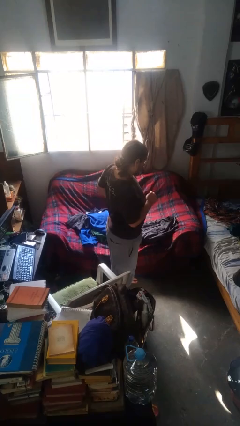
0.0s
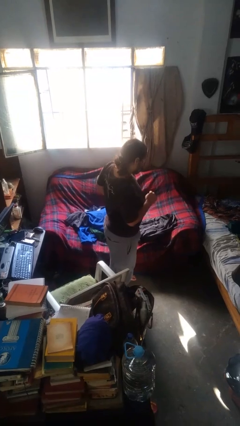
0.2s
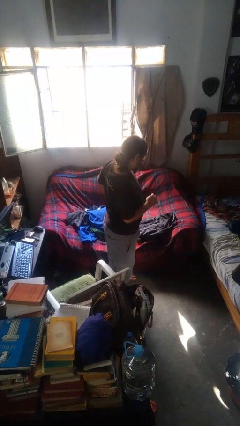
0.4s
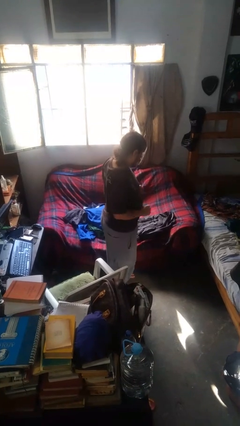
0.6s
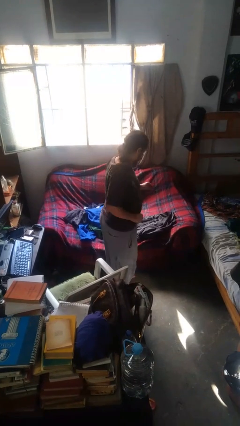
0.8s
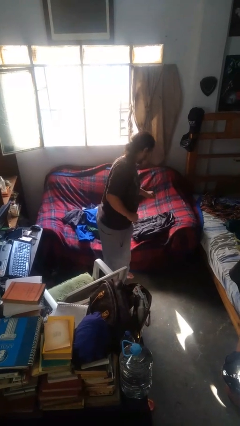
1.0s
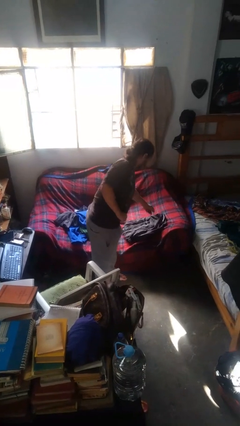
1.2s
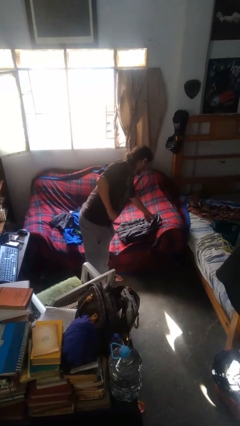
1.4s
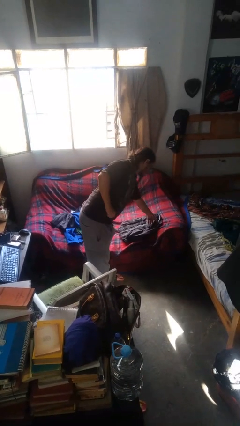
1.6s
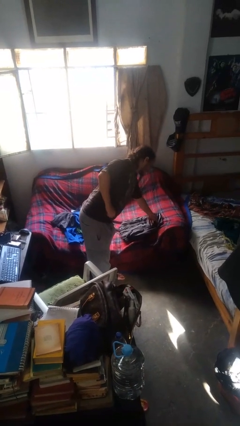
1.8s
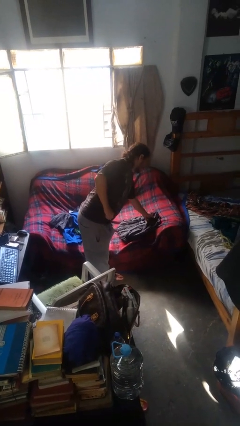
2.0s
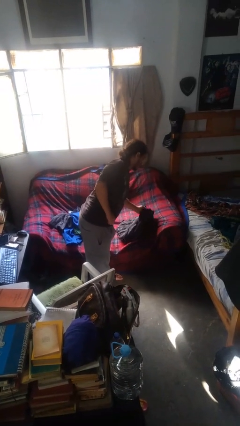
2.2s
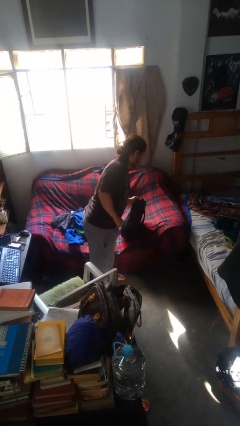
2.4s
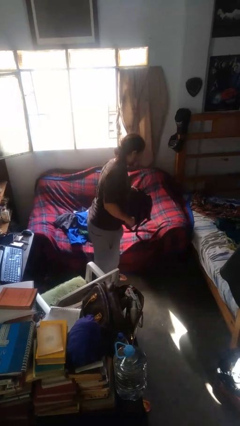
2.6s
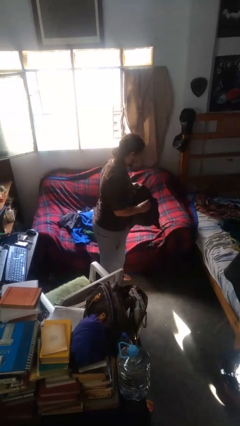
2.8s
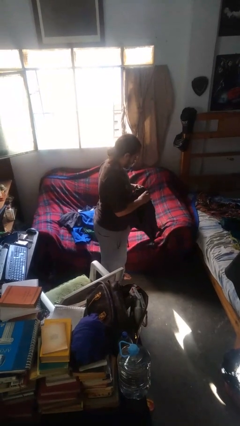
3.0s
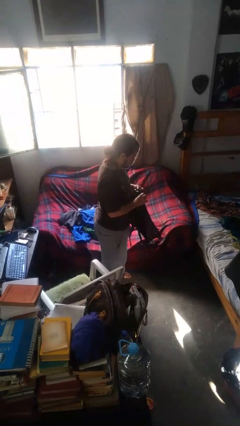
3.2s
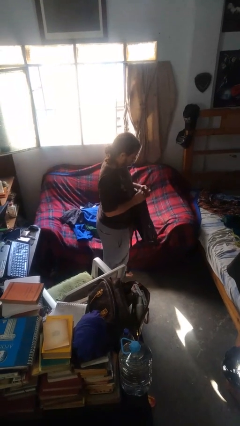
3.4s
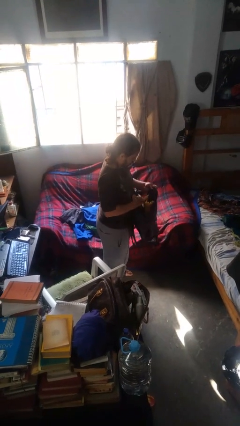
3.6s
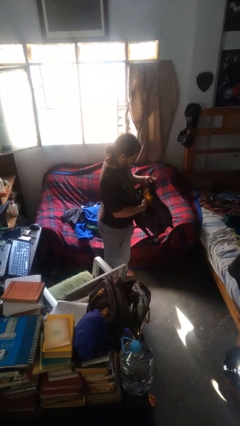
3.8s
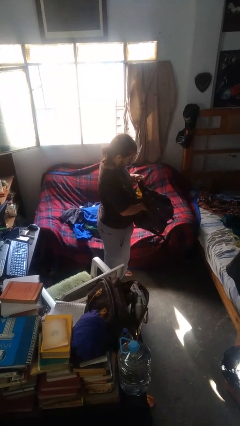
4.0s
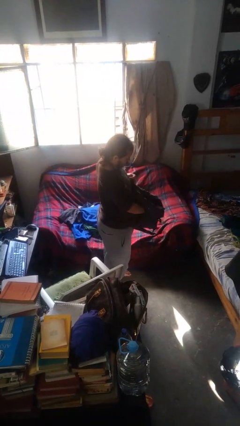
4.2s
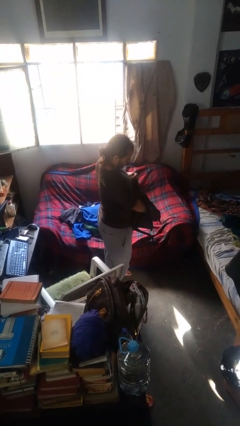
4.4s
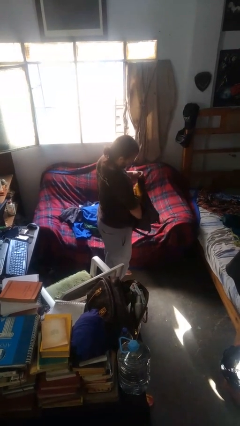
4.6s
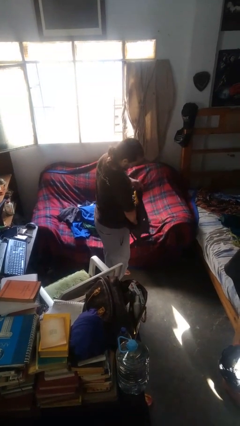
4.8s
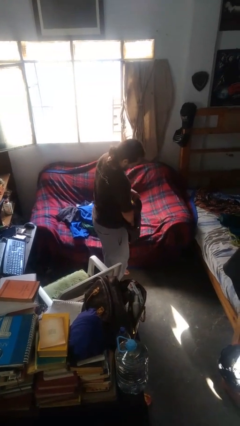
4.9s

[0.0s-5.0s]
person searches in backpack

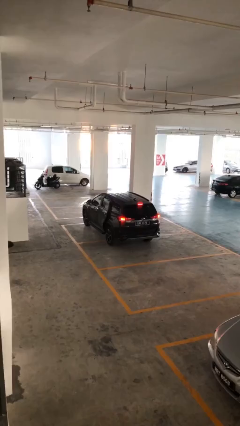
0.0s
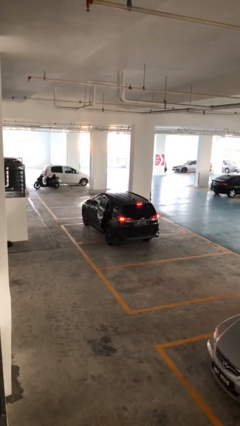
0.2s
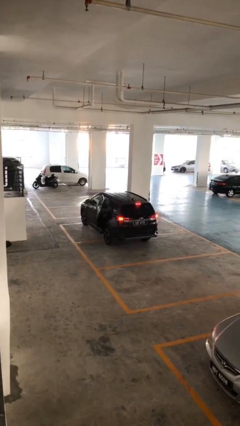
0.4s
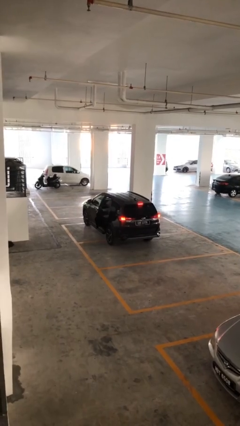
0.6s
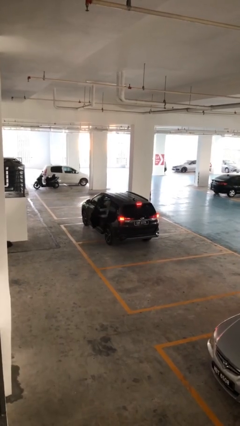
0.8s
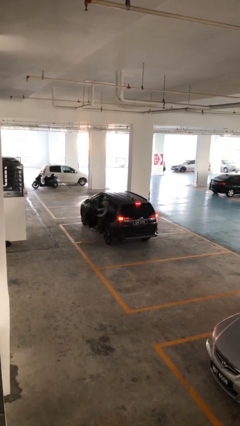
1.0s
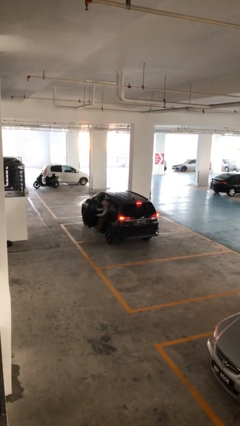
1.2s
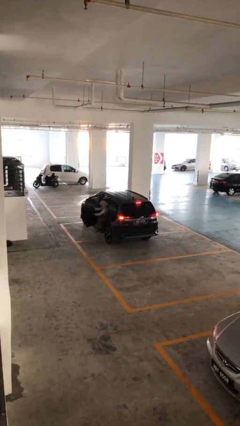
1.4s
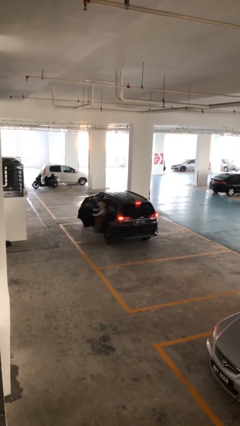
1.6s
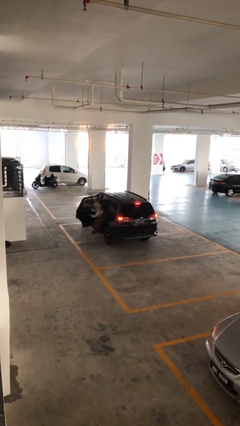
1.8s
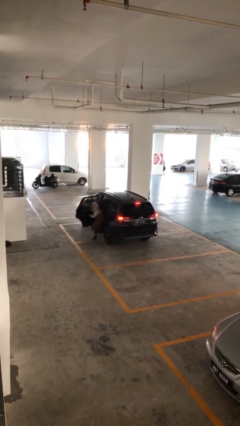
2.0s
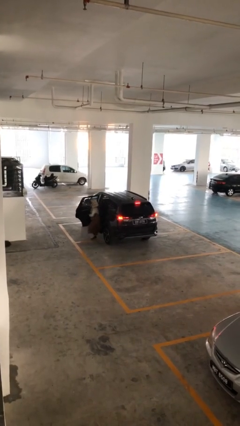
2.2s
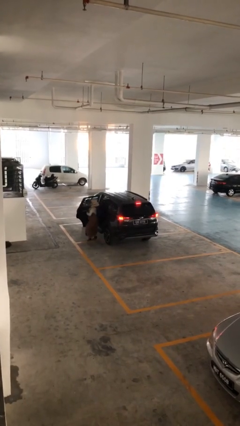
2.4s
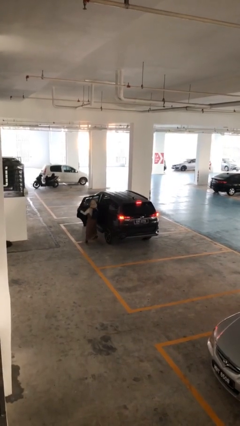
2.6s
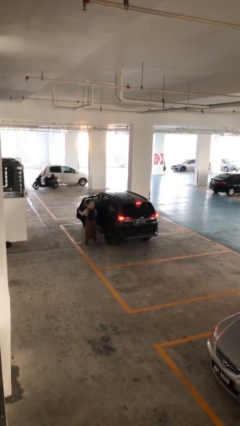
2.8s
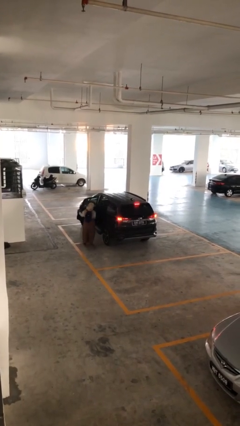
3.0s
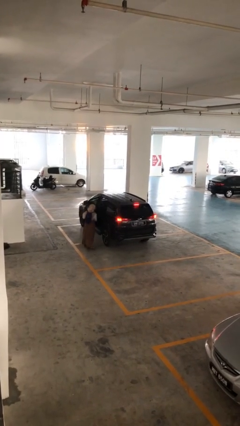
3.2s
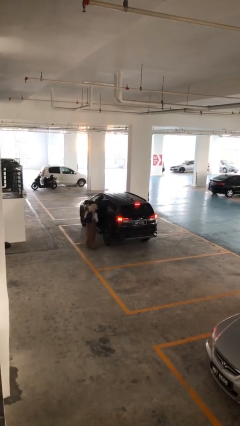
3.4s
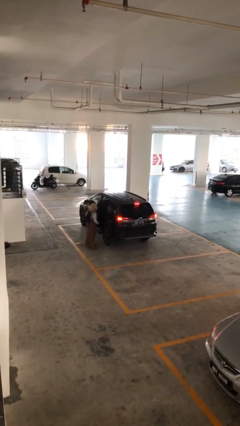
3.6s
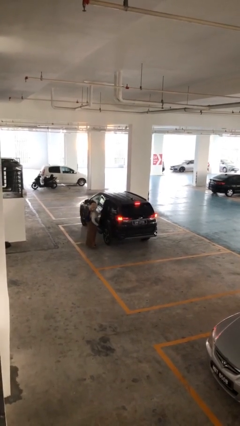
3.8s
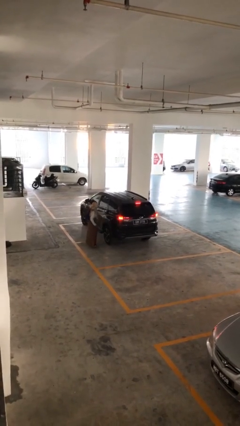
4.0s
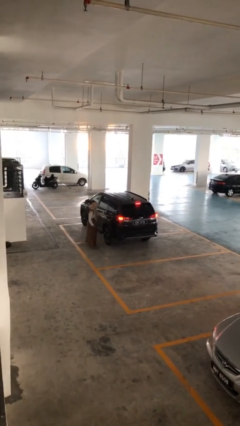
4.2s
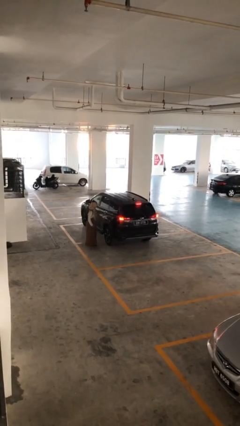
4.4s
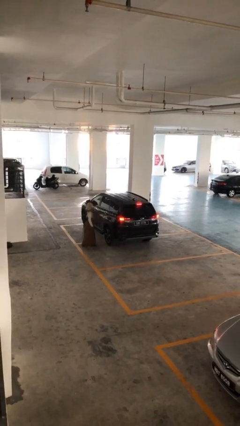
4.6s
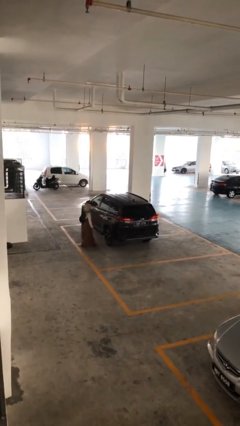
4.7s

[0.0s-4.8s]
car drops off person

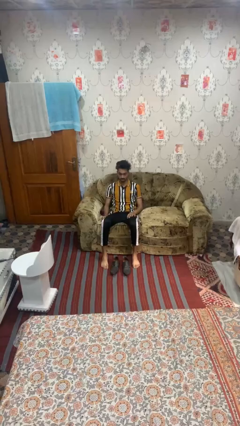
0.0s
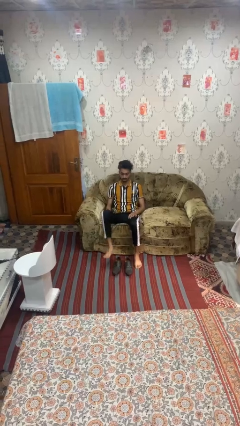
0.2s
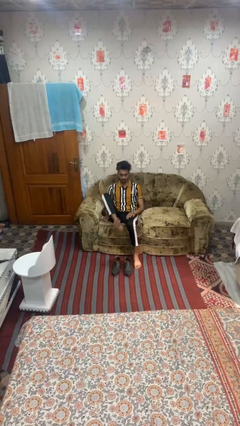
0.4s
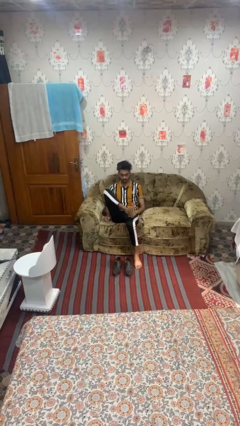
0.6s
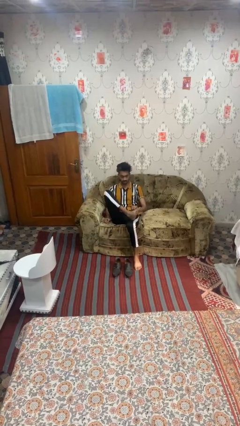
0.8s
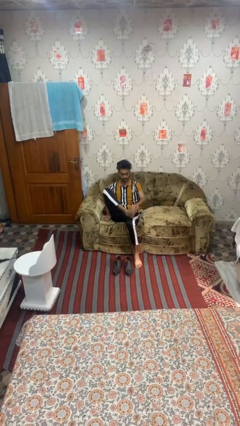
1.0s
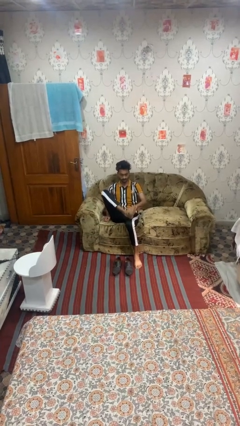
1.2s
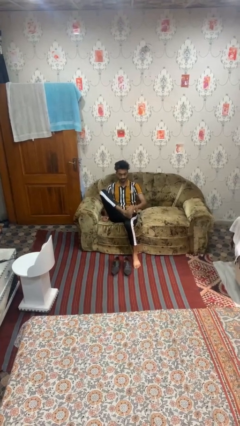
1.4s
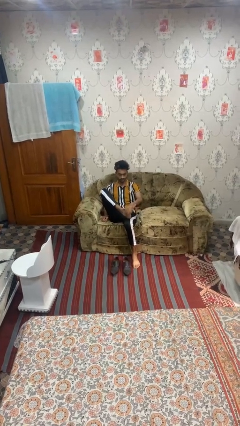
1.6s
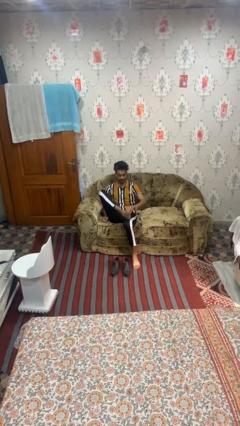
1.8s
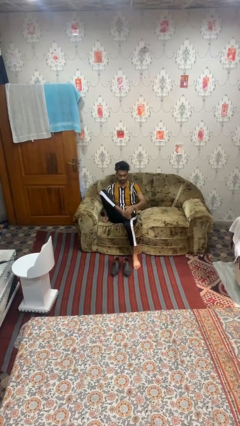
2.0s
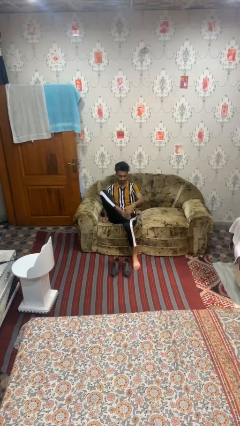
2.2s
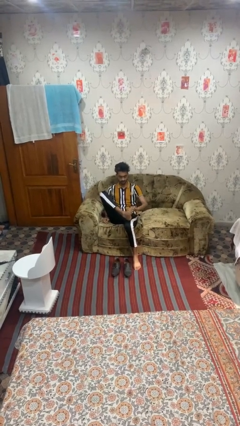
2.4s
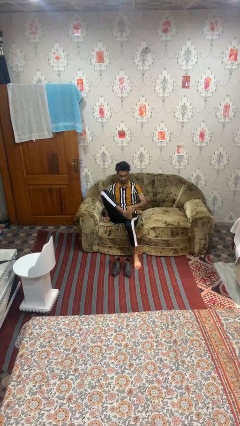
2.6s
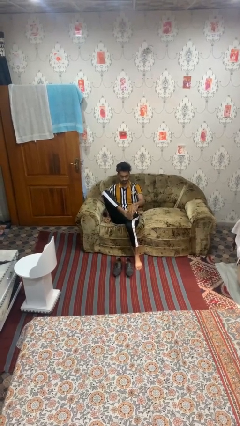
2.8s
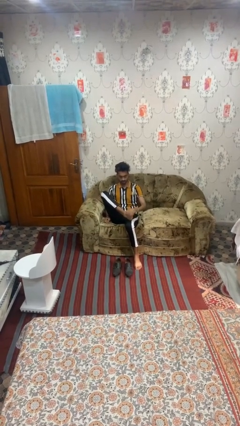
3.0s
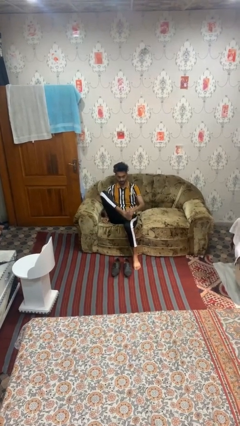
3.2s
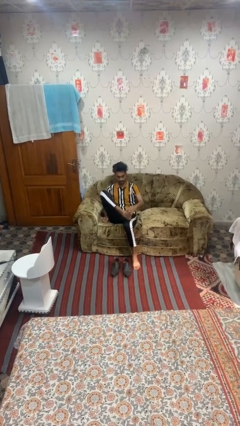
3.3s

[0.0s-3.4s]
person rubs foot

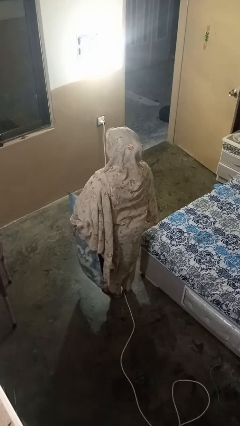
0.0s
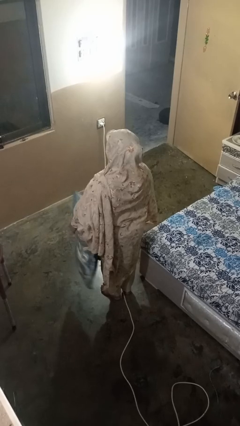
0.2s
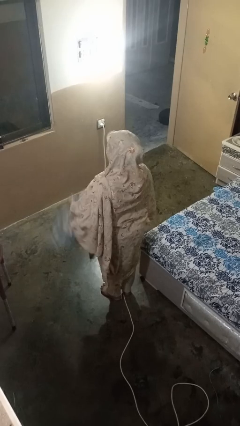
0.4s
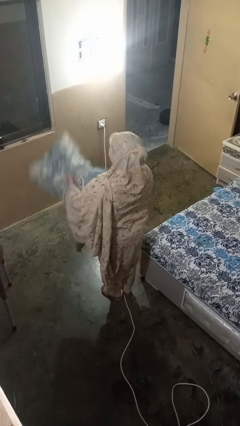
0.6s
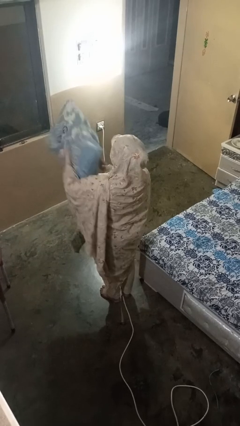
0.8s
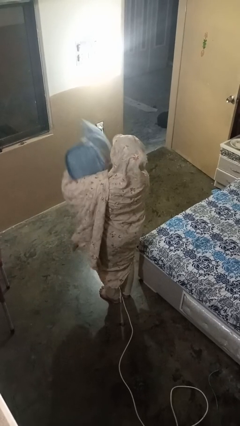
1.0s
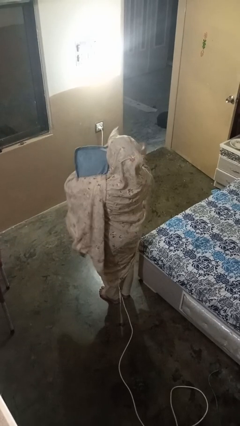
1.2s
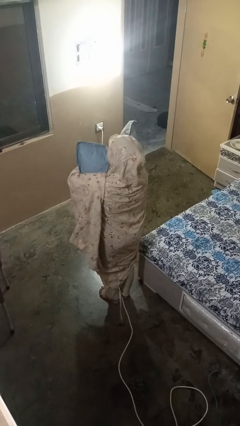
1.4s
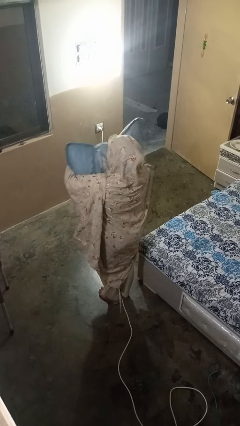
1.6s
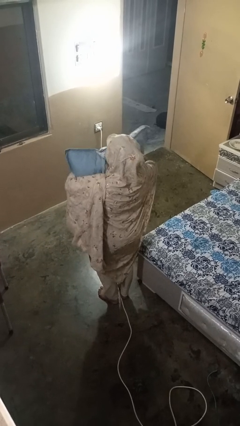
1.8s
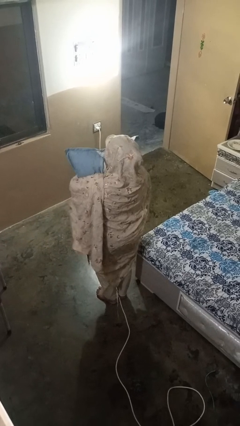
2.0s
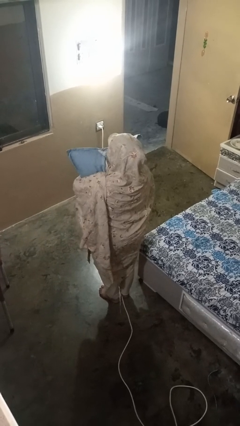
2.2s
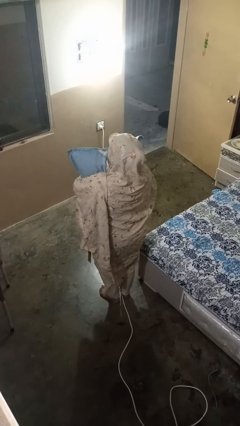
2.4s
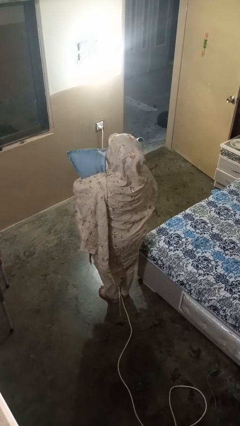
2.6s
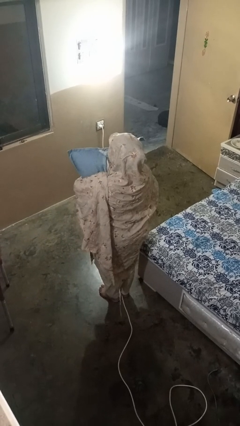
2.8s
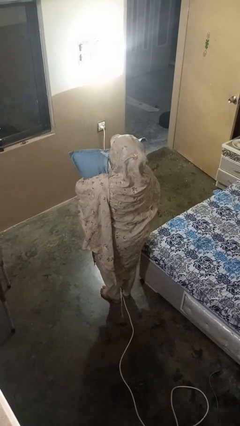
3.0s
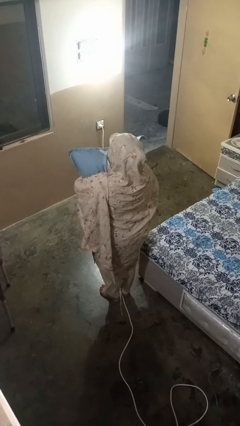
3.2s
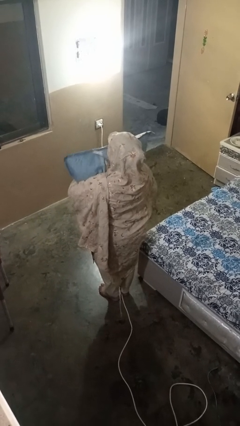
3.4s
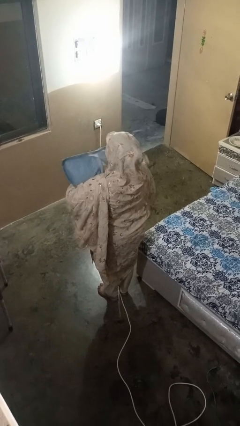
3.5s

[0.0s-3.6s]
person squeezes object

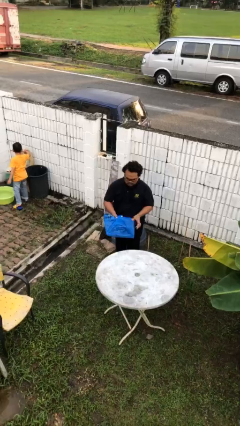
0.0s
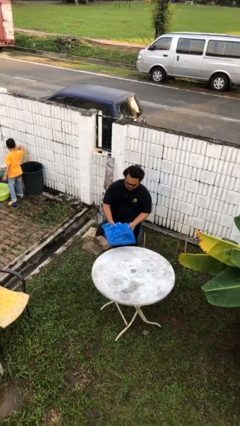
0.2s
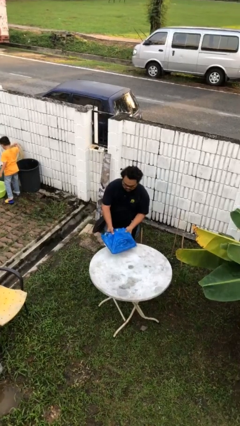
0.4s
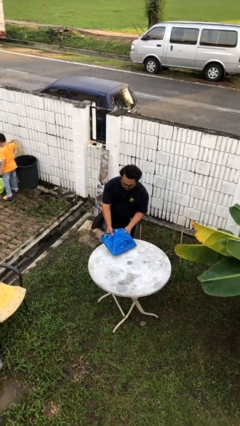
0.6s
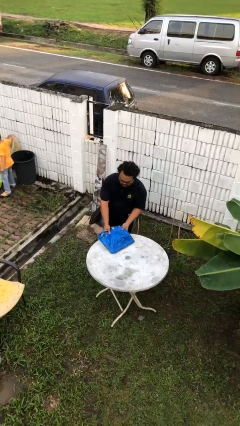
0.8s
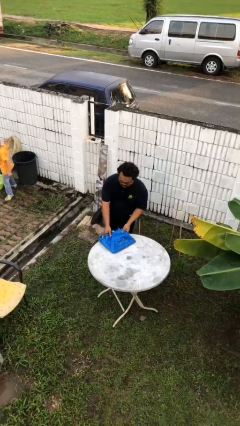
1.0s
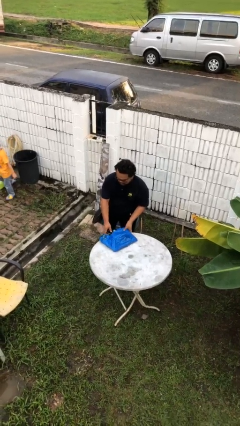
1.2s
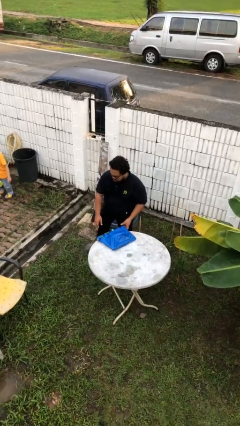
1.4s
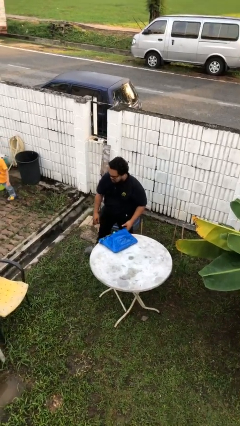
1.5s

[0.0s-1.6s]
person puts down object on table
